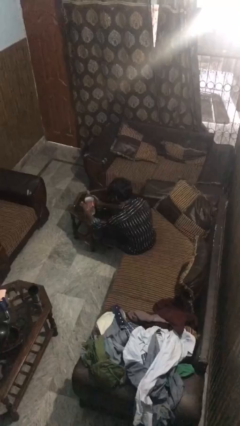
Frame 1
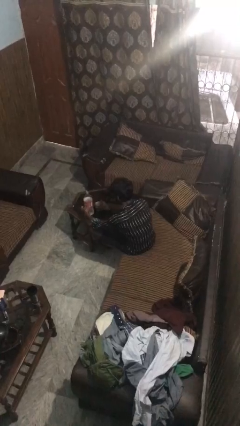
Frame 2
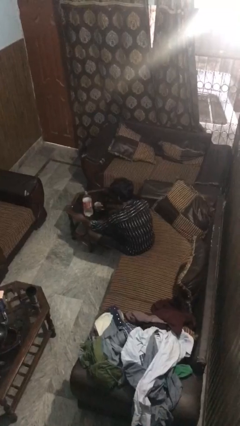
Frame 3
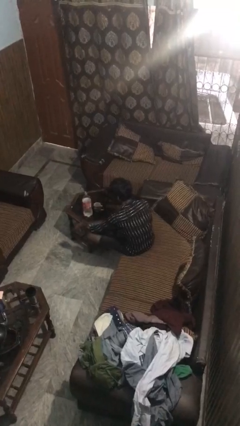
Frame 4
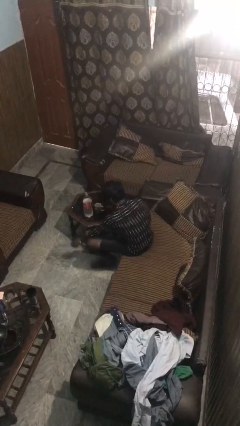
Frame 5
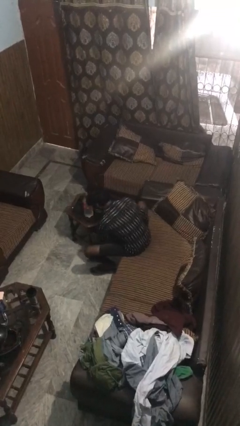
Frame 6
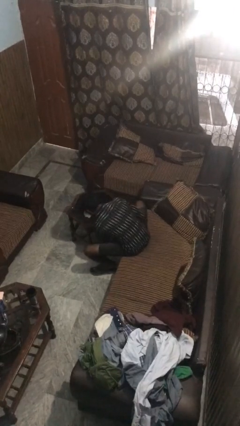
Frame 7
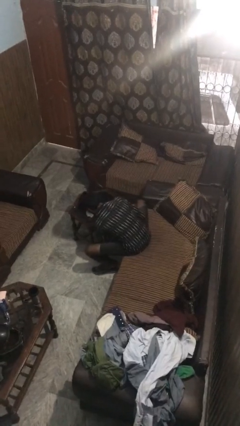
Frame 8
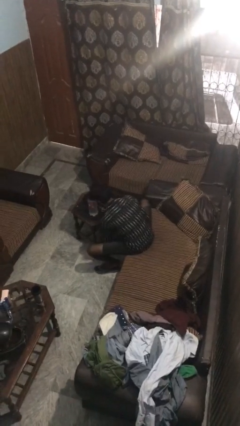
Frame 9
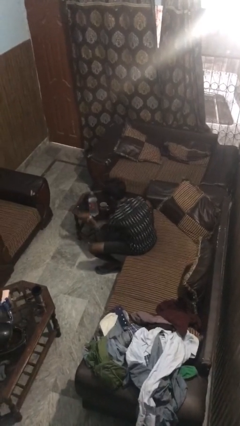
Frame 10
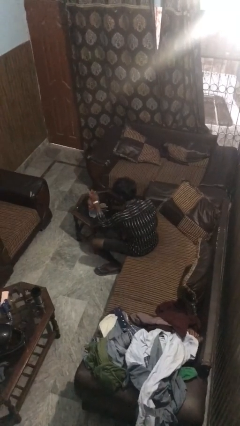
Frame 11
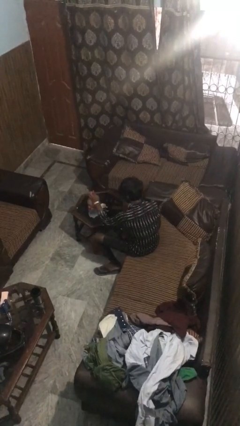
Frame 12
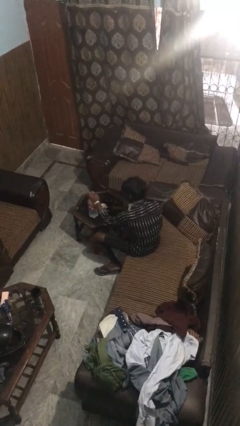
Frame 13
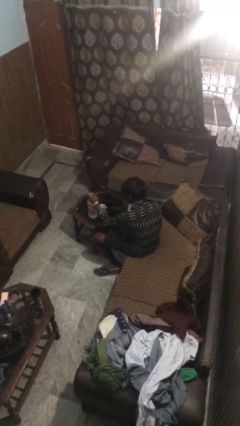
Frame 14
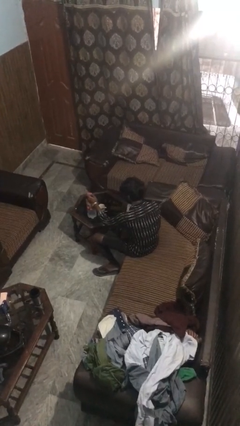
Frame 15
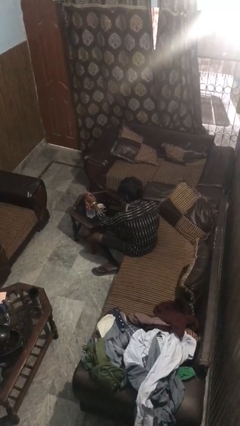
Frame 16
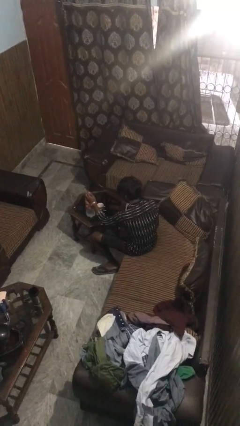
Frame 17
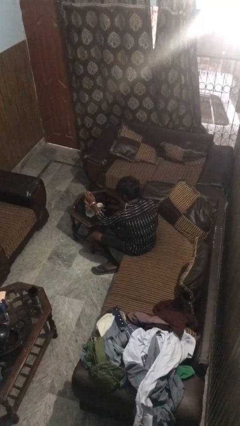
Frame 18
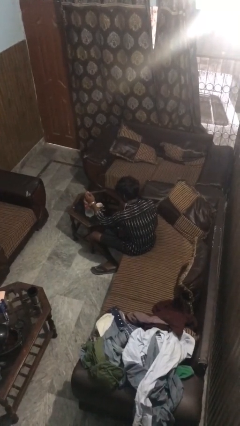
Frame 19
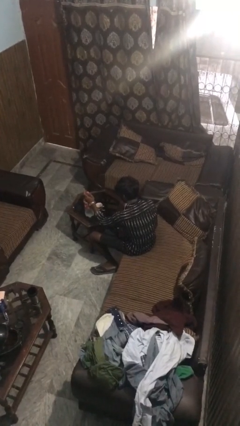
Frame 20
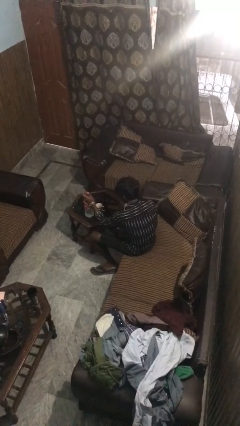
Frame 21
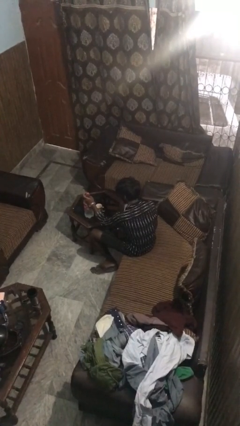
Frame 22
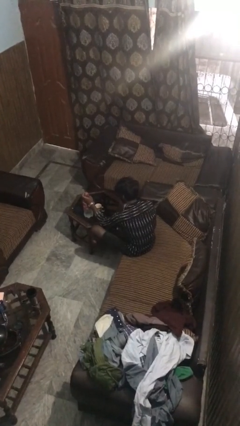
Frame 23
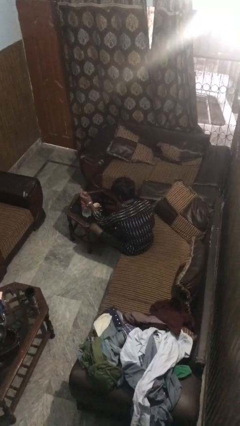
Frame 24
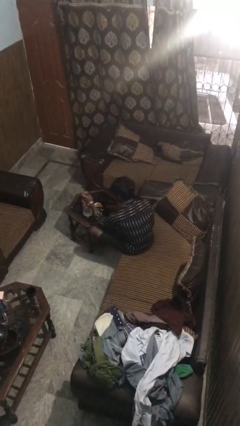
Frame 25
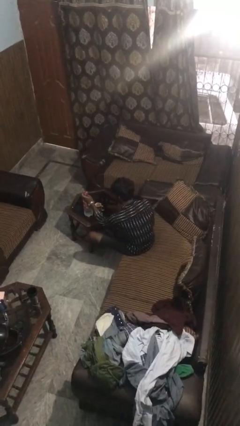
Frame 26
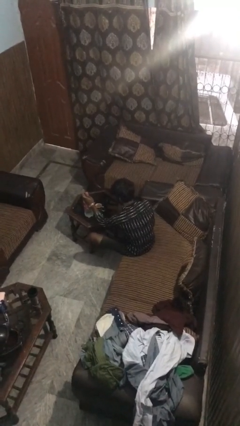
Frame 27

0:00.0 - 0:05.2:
person screws lid to bottle

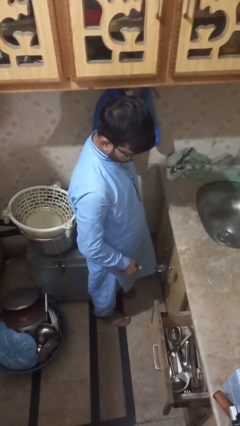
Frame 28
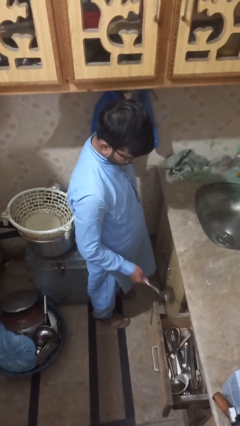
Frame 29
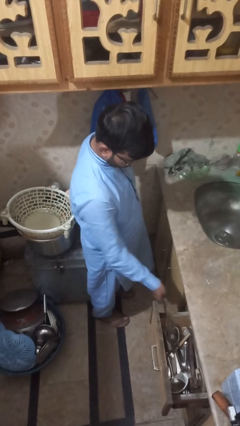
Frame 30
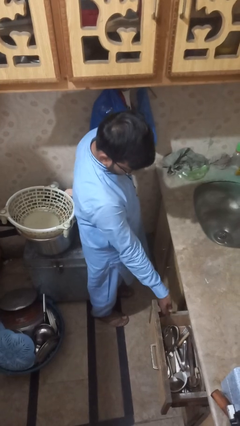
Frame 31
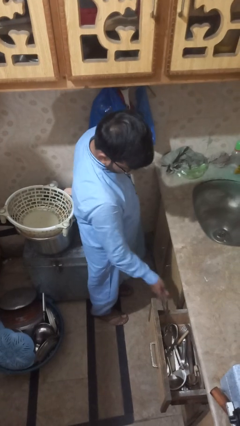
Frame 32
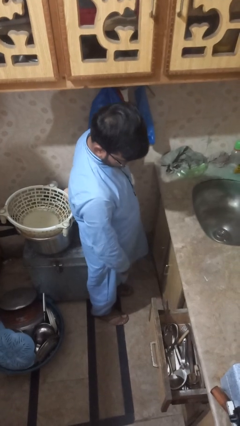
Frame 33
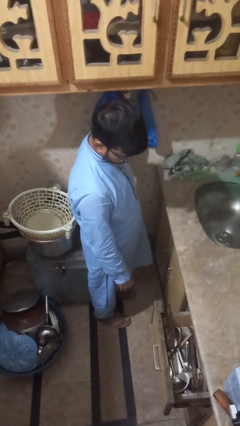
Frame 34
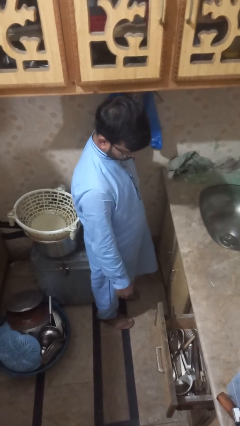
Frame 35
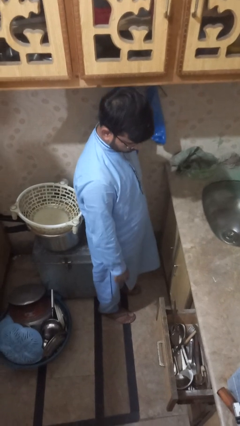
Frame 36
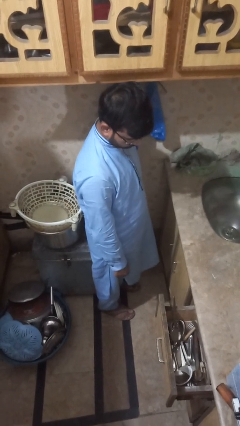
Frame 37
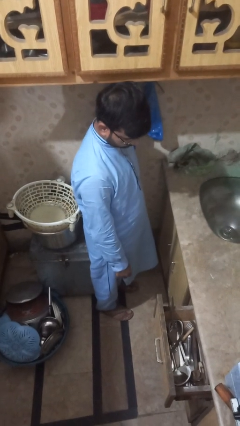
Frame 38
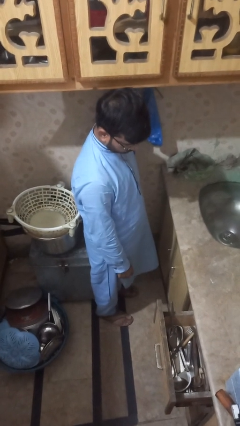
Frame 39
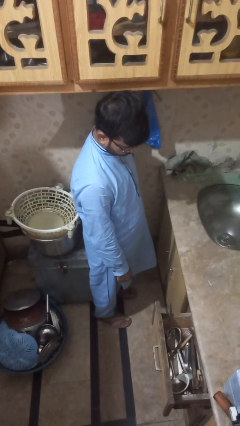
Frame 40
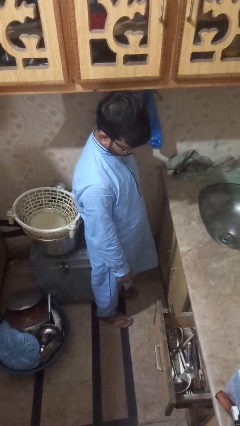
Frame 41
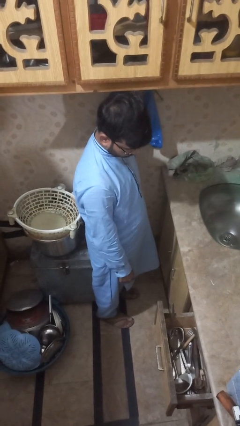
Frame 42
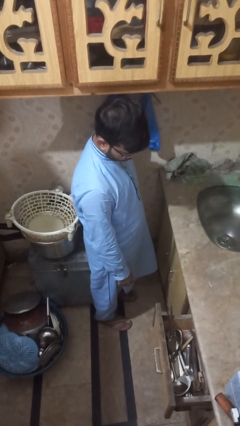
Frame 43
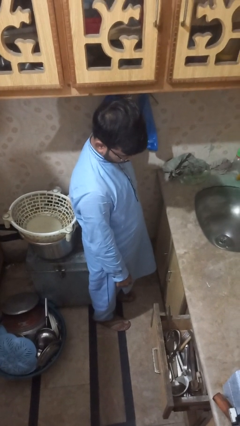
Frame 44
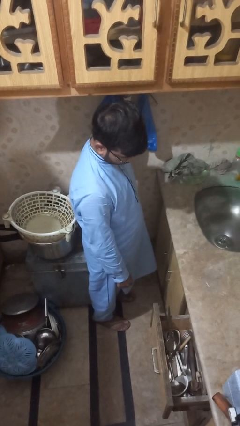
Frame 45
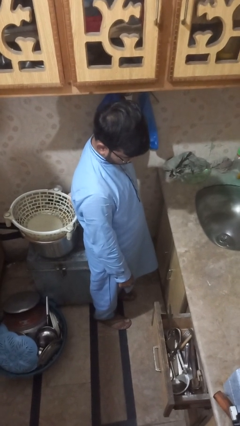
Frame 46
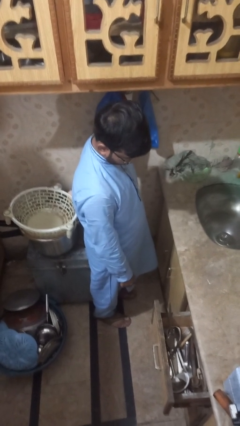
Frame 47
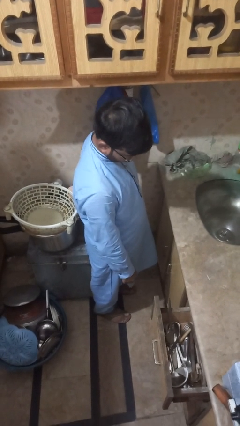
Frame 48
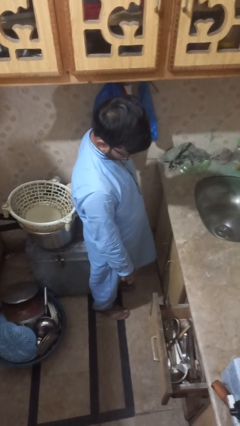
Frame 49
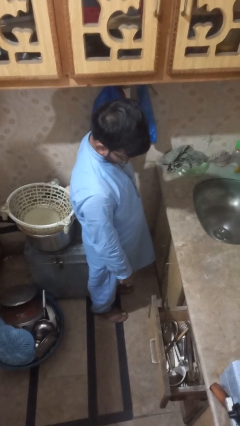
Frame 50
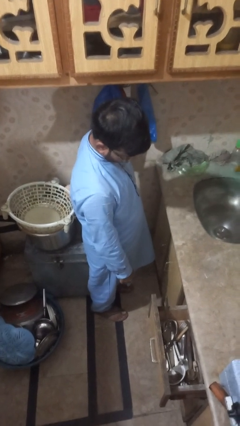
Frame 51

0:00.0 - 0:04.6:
person puts object into kitchen drawer

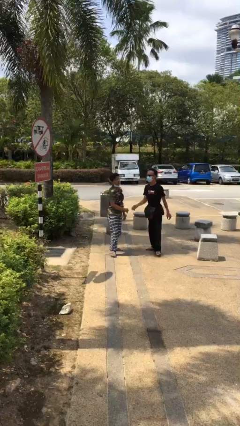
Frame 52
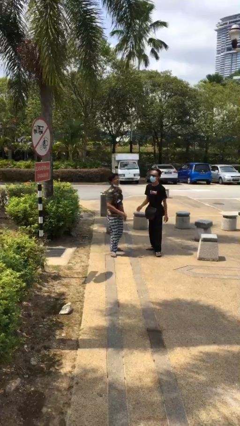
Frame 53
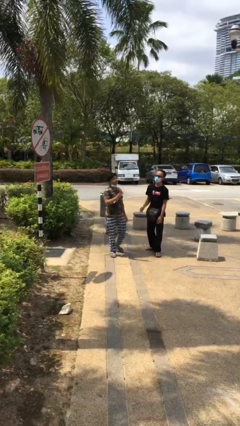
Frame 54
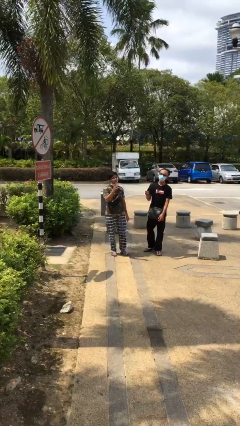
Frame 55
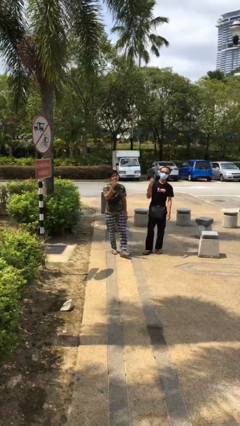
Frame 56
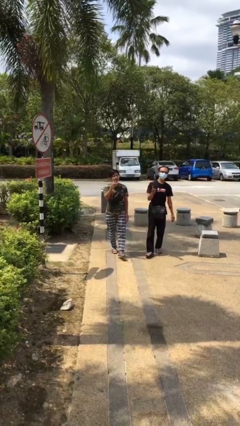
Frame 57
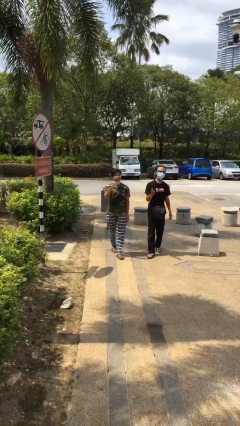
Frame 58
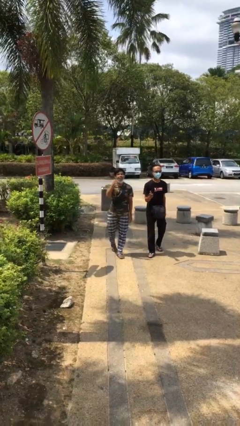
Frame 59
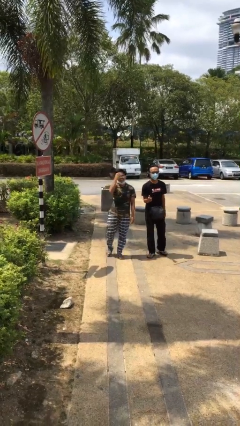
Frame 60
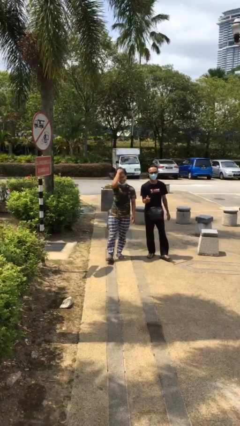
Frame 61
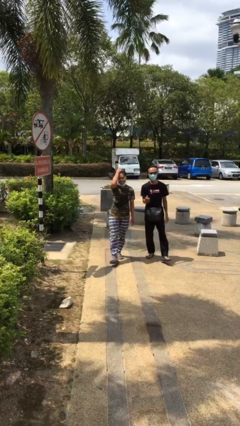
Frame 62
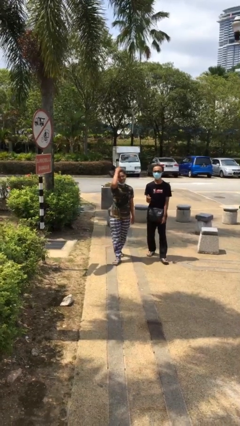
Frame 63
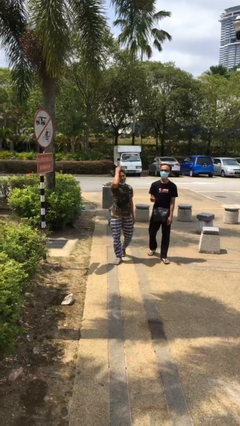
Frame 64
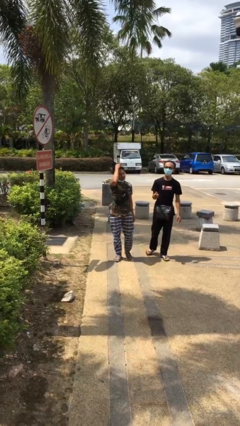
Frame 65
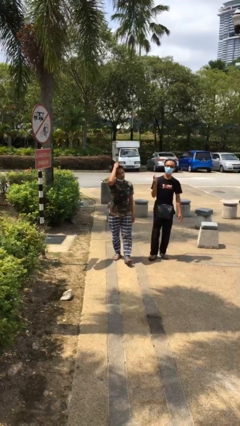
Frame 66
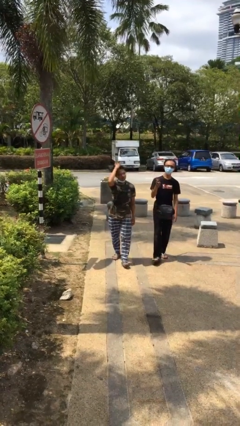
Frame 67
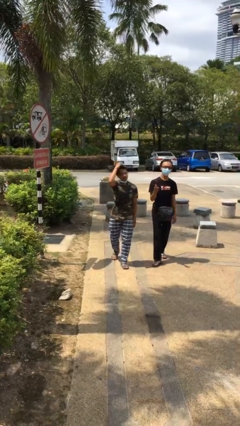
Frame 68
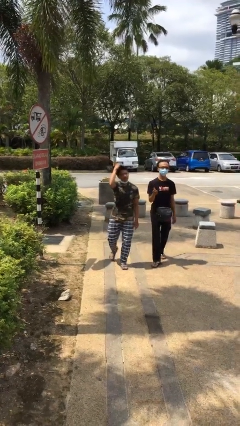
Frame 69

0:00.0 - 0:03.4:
person talks to person

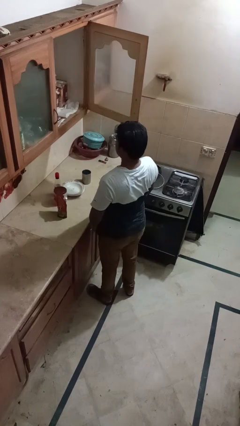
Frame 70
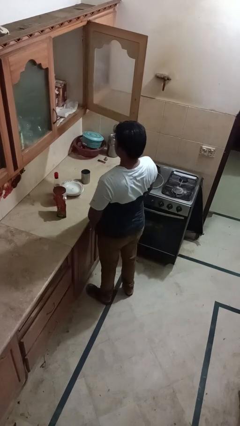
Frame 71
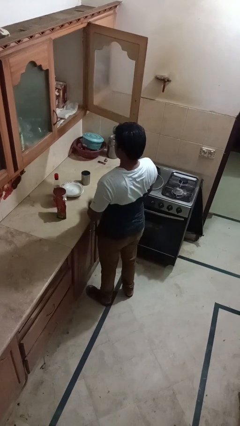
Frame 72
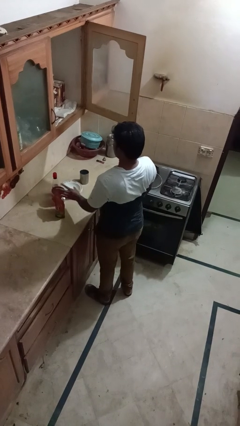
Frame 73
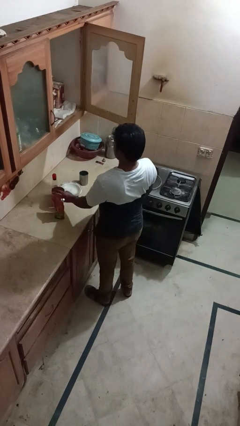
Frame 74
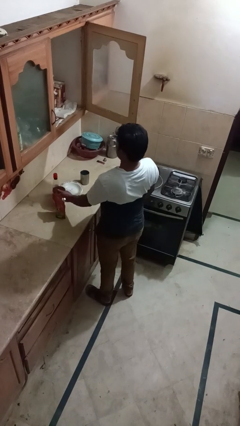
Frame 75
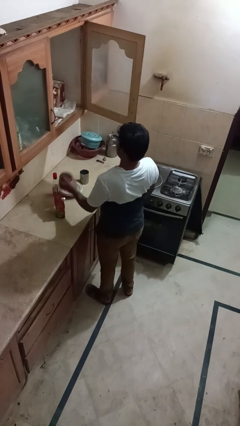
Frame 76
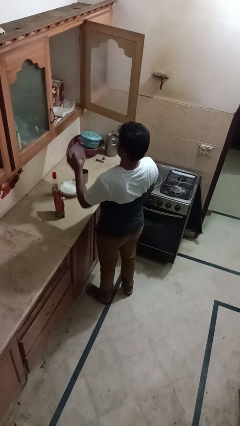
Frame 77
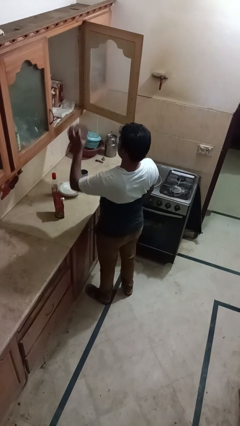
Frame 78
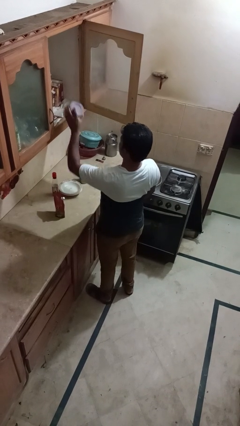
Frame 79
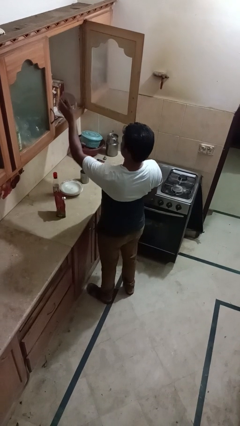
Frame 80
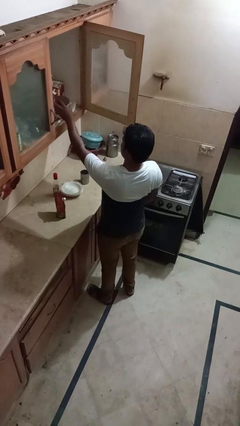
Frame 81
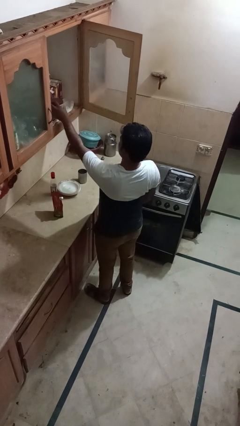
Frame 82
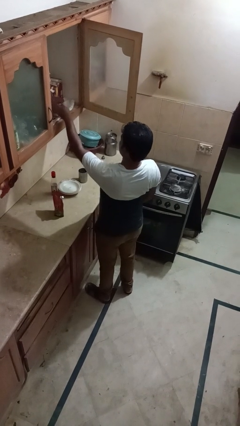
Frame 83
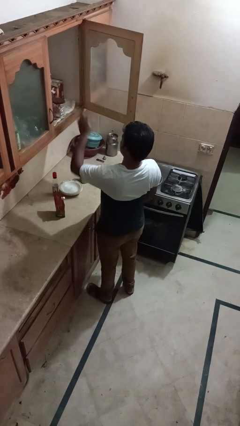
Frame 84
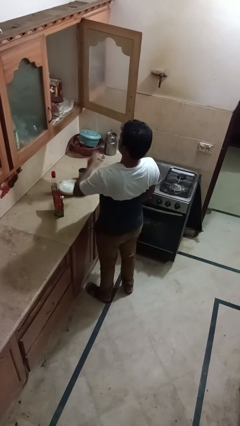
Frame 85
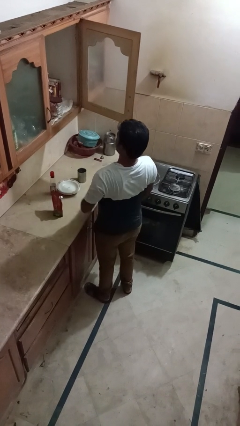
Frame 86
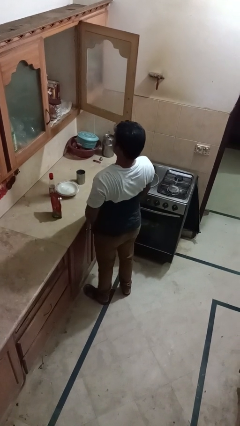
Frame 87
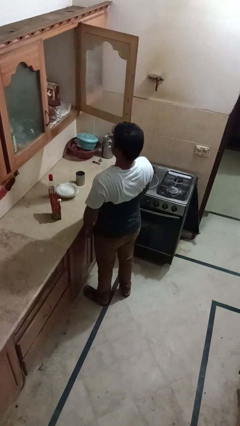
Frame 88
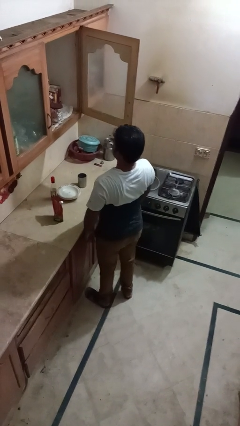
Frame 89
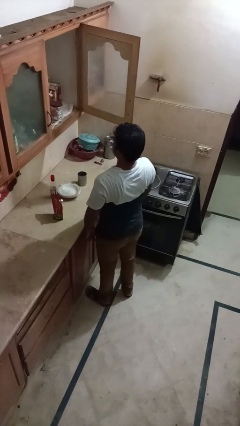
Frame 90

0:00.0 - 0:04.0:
person puts object in cabinet

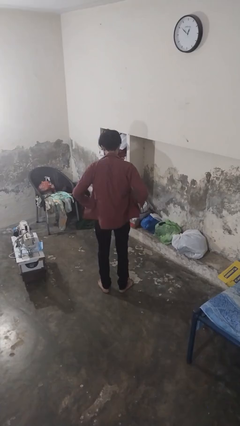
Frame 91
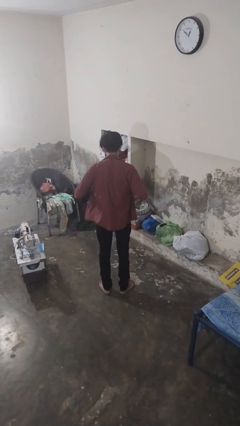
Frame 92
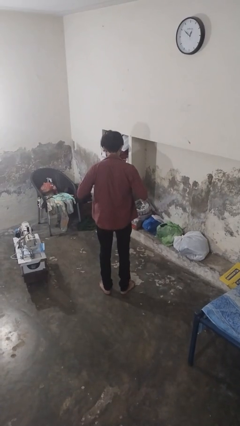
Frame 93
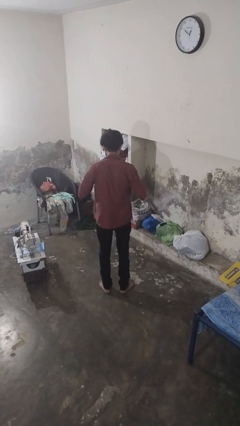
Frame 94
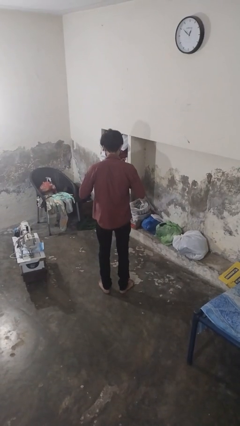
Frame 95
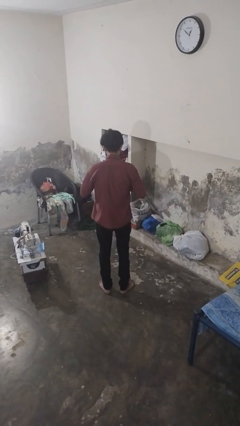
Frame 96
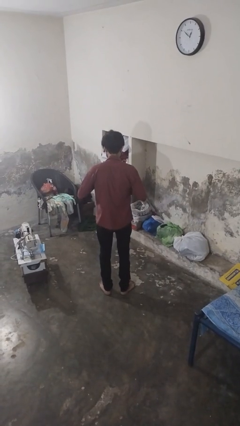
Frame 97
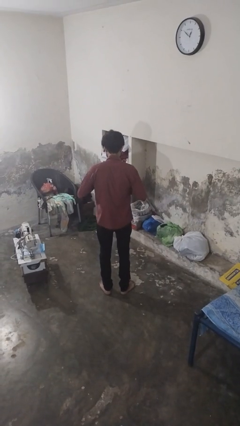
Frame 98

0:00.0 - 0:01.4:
person buttons shirt
